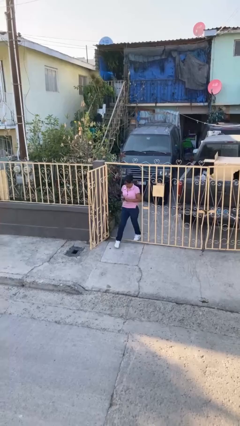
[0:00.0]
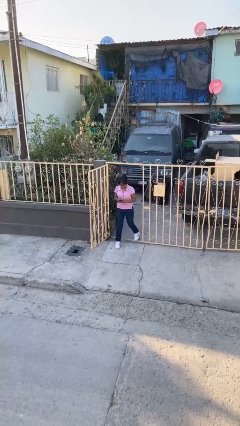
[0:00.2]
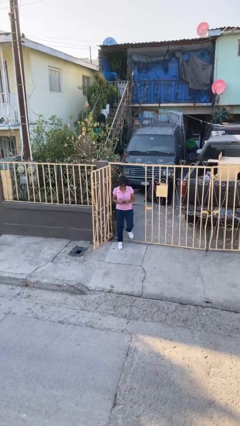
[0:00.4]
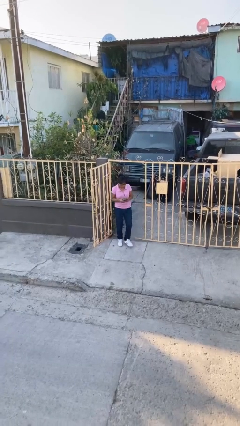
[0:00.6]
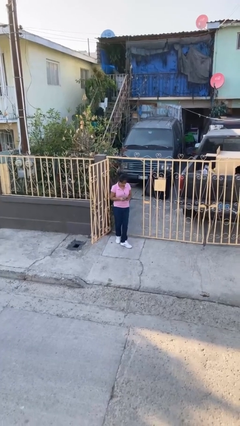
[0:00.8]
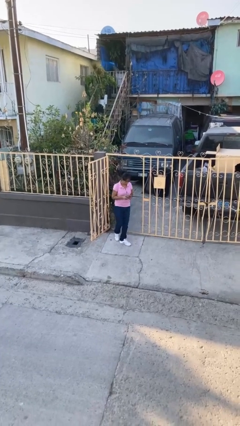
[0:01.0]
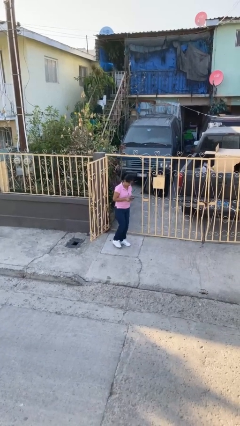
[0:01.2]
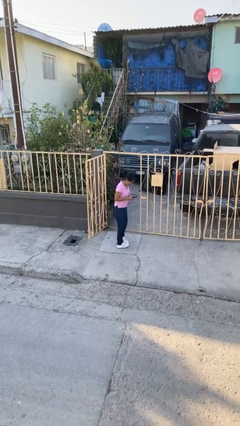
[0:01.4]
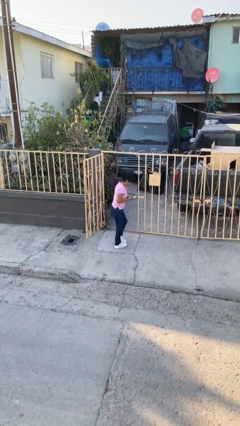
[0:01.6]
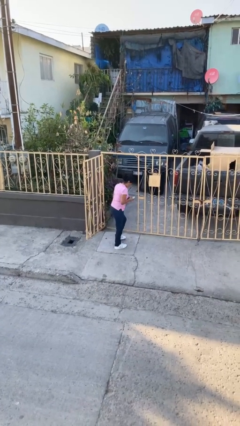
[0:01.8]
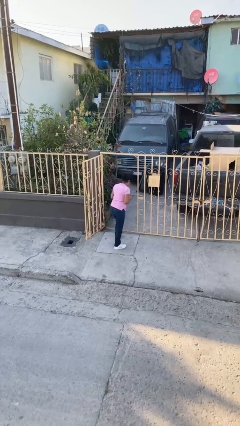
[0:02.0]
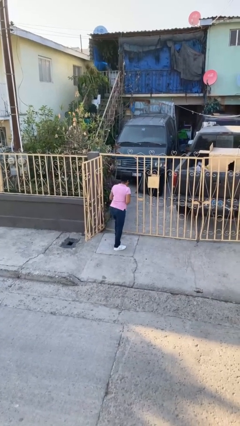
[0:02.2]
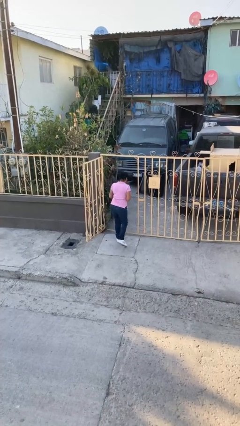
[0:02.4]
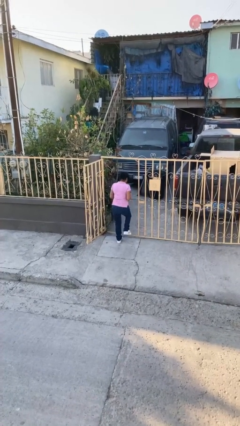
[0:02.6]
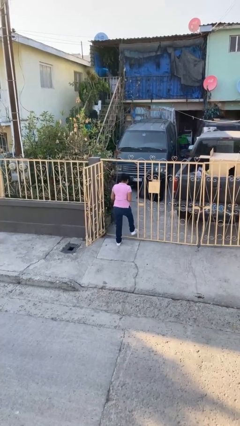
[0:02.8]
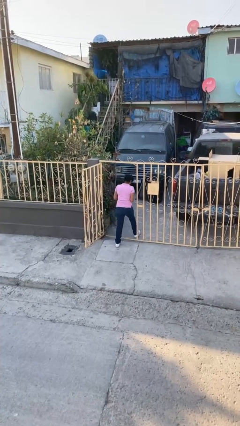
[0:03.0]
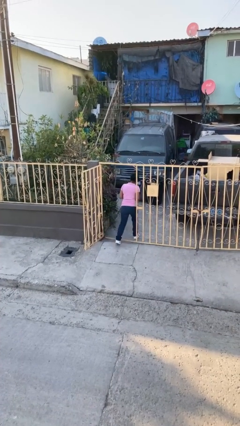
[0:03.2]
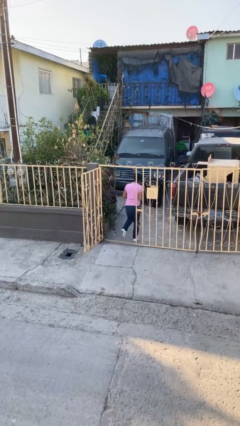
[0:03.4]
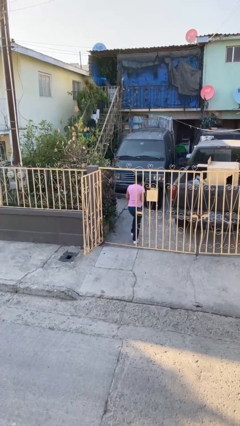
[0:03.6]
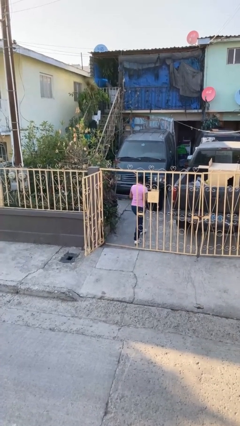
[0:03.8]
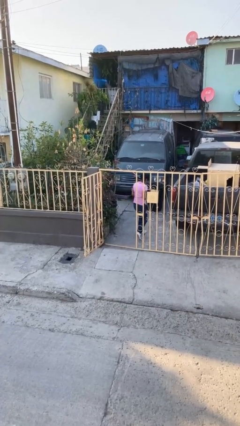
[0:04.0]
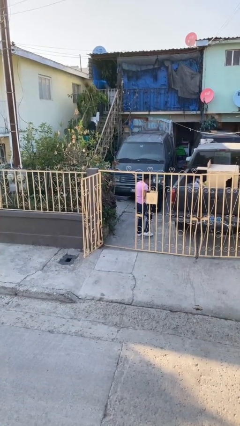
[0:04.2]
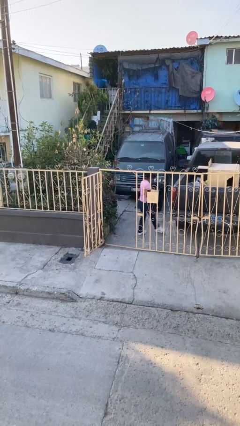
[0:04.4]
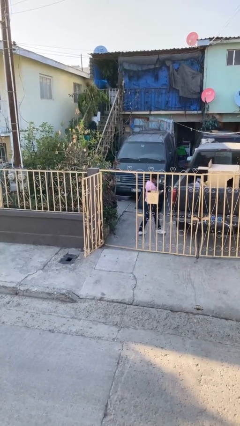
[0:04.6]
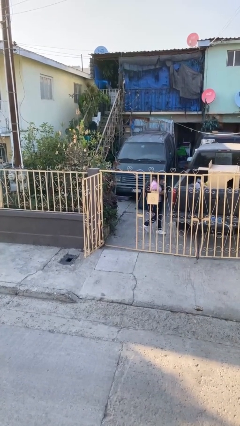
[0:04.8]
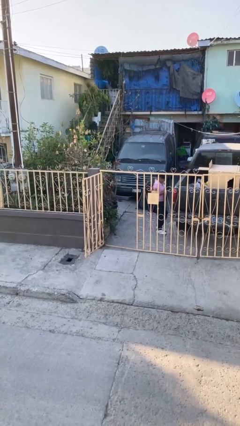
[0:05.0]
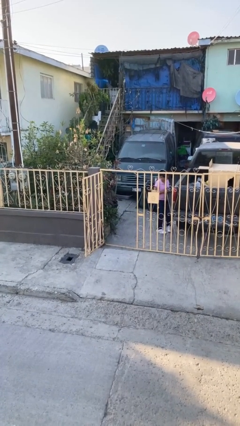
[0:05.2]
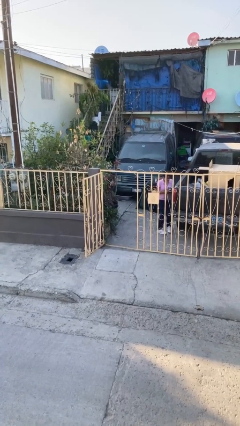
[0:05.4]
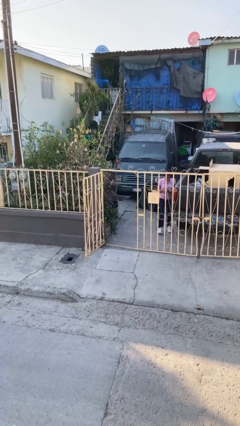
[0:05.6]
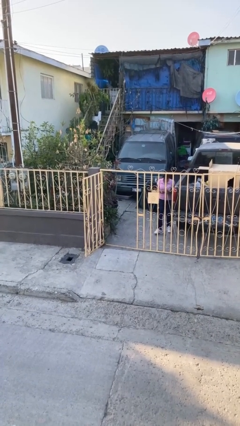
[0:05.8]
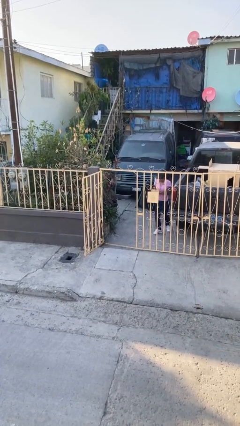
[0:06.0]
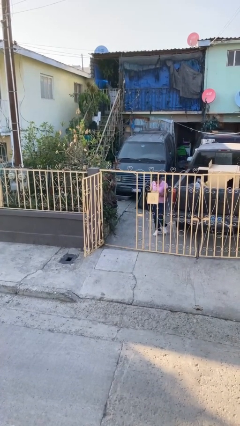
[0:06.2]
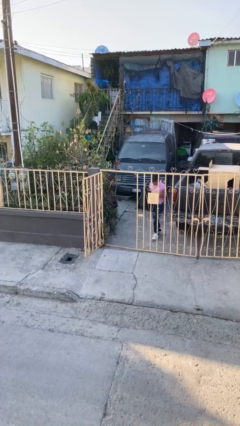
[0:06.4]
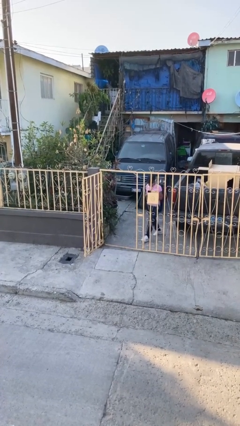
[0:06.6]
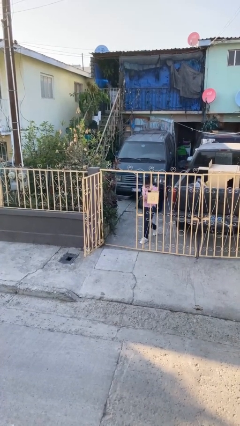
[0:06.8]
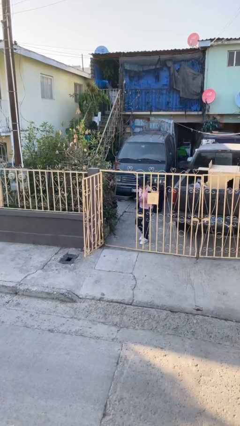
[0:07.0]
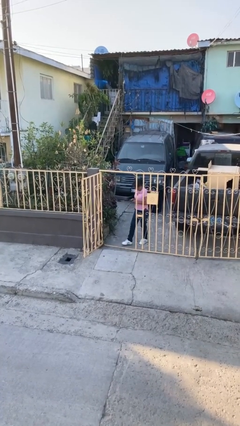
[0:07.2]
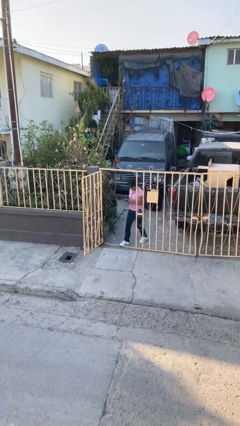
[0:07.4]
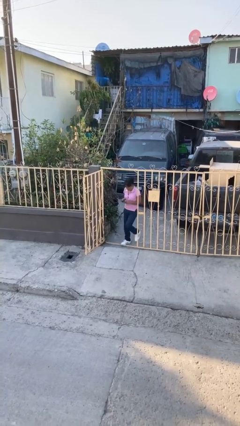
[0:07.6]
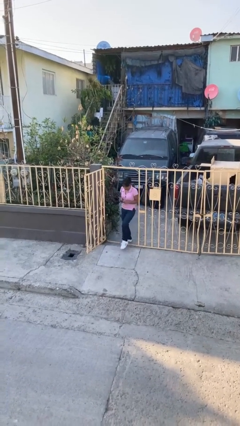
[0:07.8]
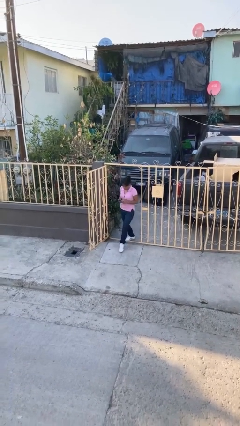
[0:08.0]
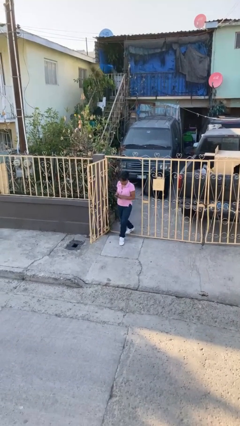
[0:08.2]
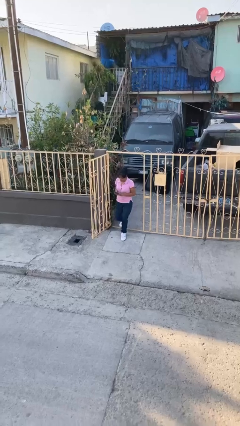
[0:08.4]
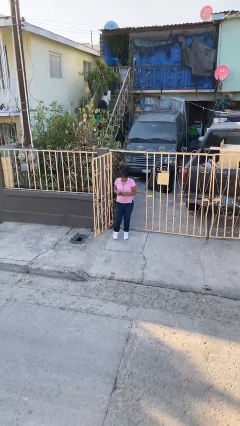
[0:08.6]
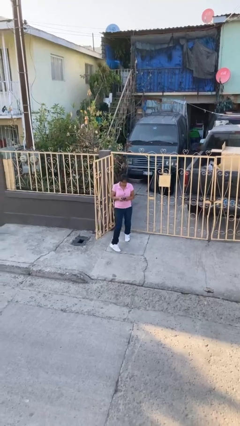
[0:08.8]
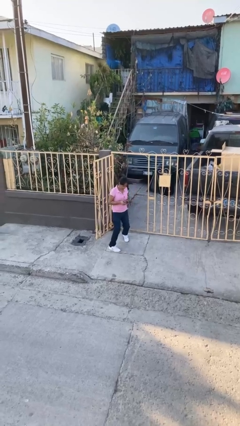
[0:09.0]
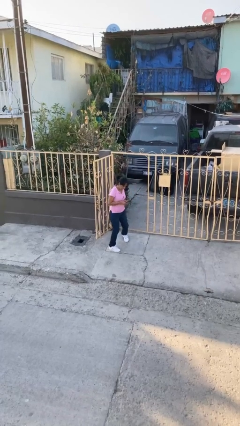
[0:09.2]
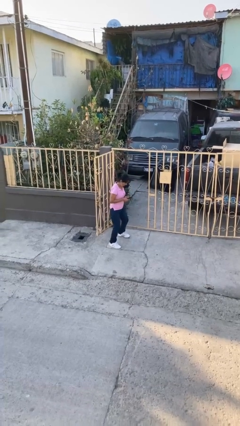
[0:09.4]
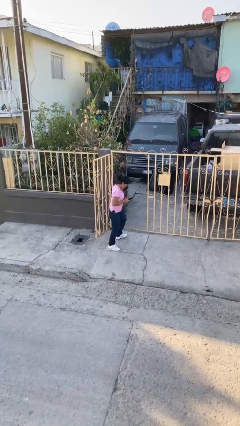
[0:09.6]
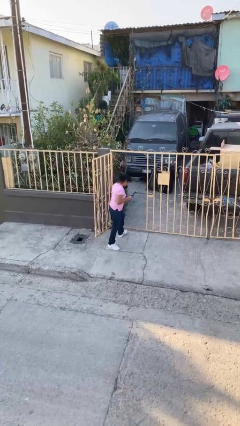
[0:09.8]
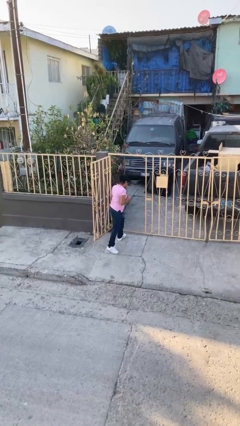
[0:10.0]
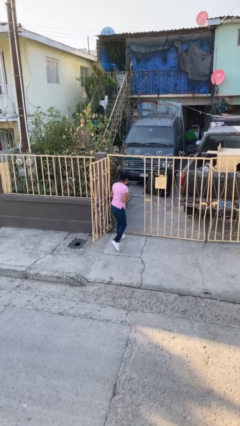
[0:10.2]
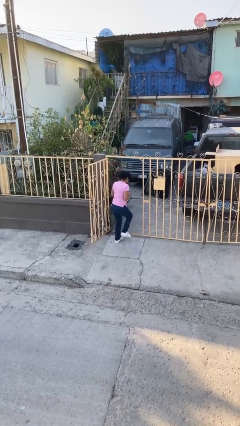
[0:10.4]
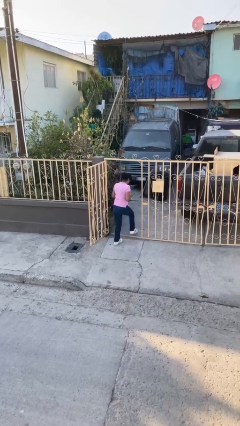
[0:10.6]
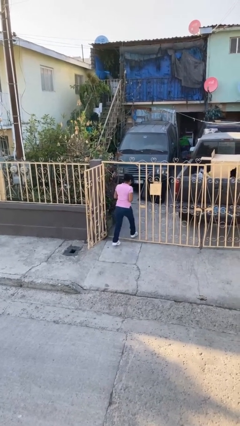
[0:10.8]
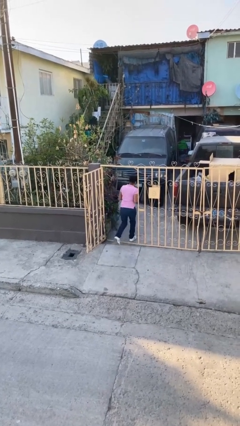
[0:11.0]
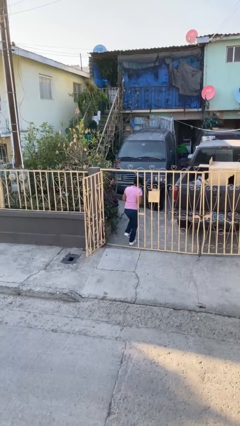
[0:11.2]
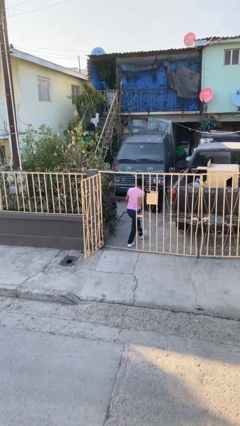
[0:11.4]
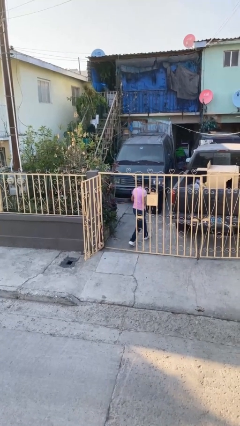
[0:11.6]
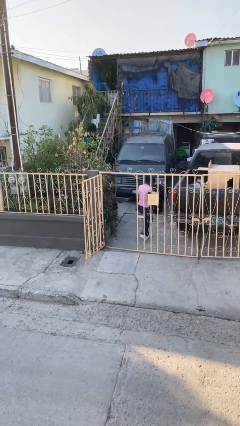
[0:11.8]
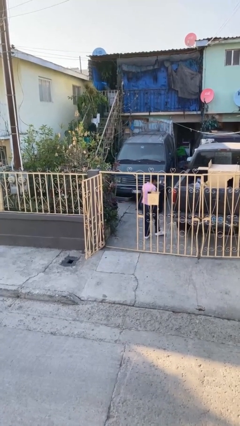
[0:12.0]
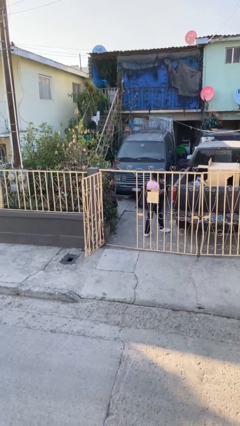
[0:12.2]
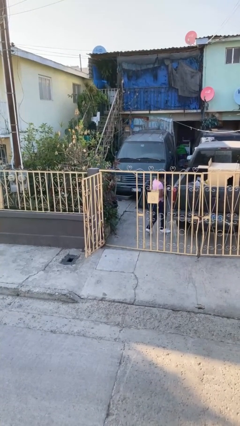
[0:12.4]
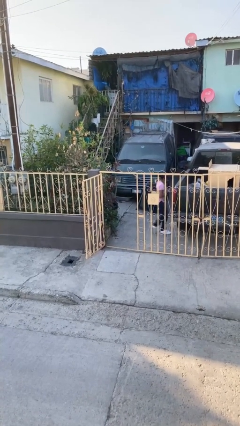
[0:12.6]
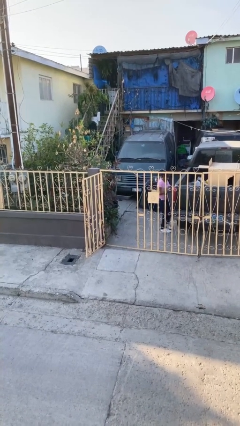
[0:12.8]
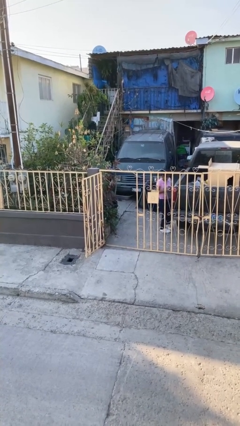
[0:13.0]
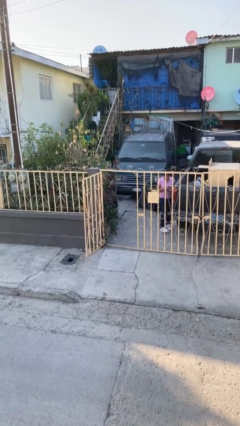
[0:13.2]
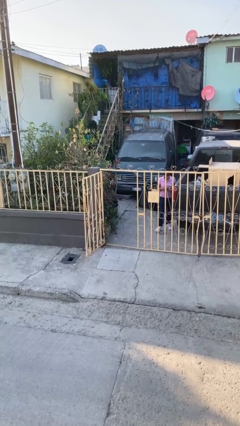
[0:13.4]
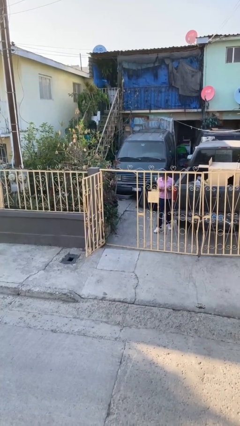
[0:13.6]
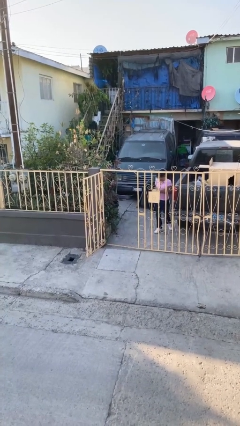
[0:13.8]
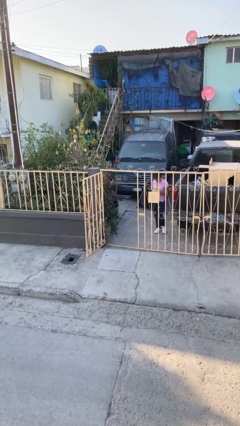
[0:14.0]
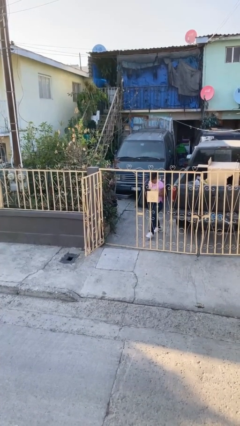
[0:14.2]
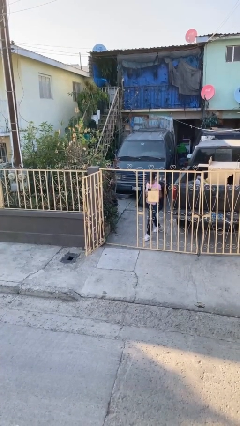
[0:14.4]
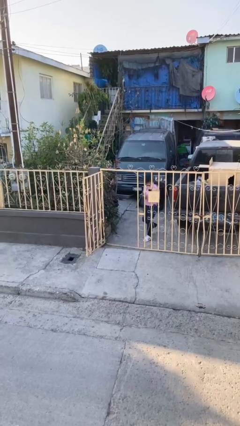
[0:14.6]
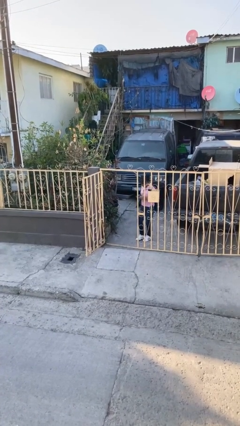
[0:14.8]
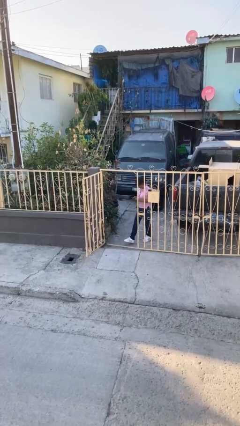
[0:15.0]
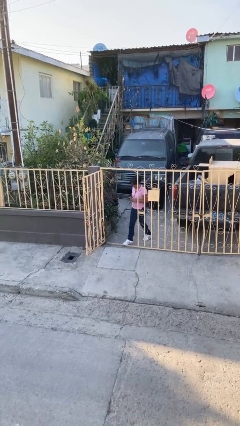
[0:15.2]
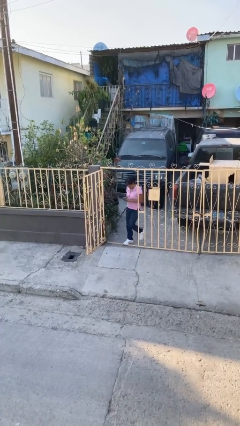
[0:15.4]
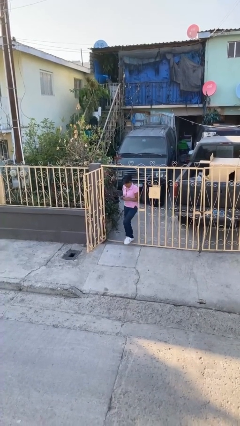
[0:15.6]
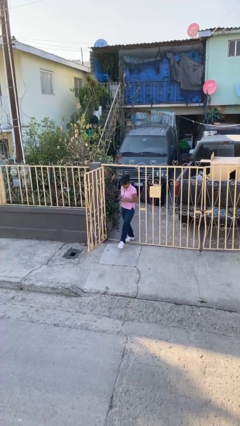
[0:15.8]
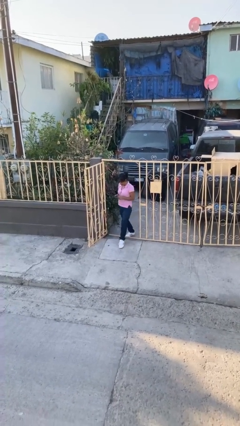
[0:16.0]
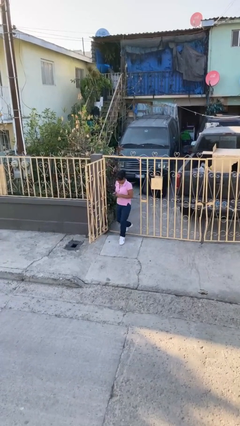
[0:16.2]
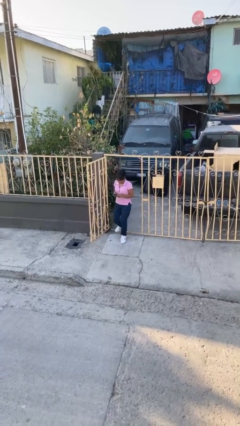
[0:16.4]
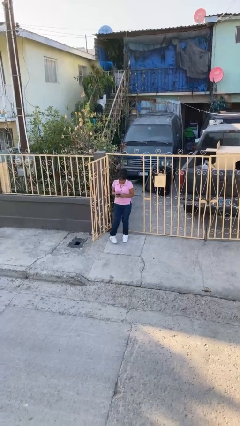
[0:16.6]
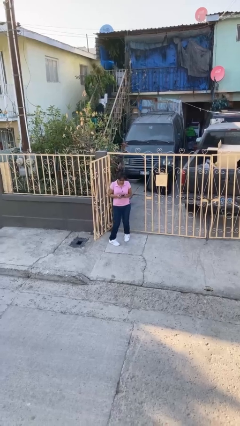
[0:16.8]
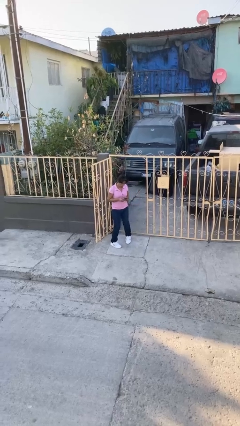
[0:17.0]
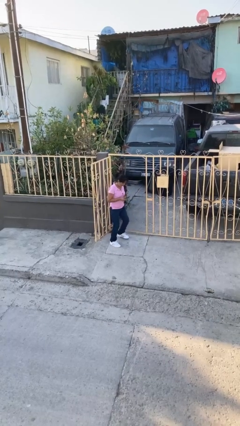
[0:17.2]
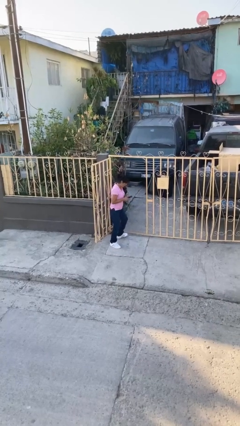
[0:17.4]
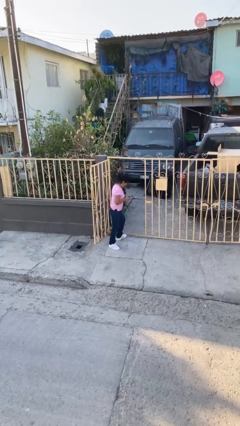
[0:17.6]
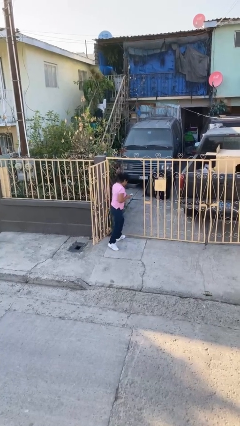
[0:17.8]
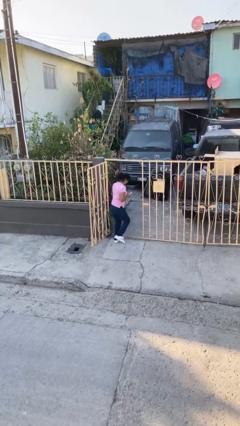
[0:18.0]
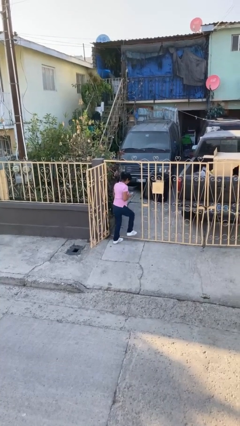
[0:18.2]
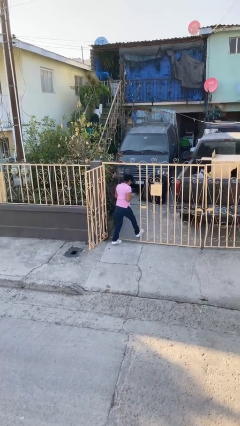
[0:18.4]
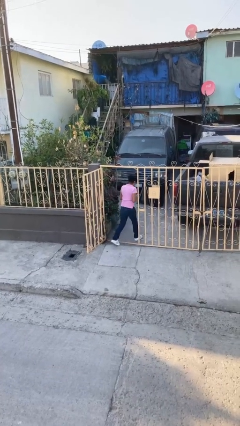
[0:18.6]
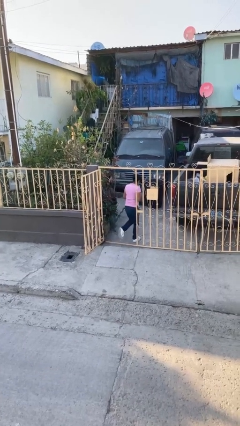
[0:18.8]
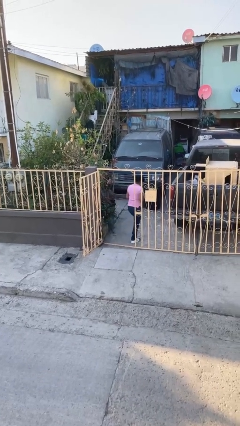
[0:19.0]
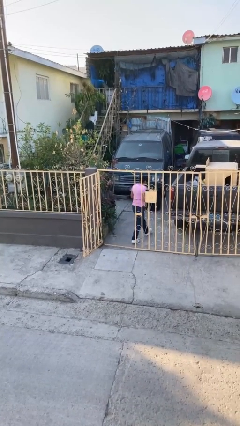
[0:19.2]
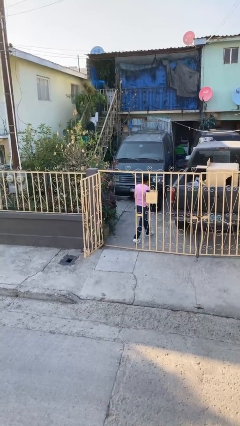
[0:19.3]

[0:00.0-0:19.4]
person texts on phone
